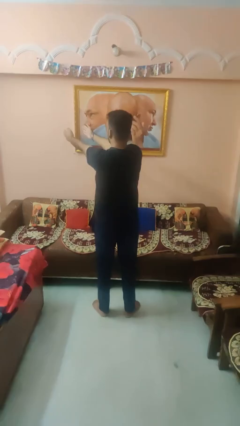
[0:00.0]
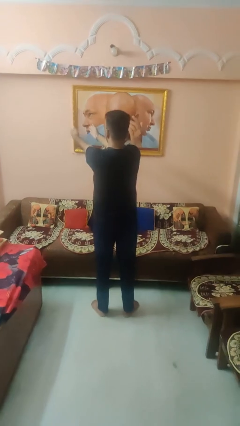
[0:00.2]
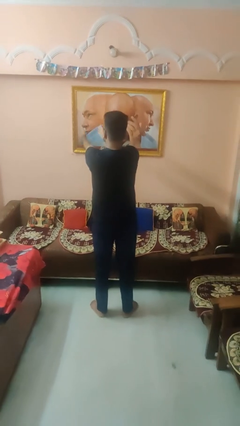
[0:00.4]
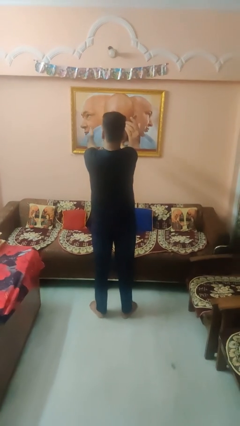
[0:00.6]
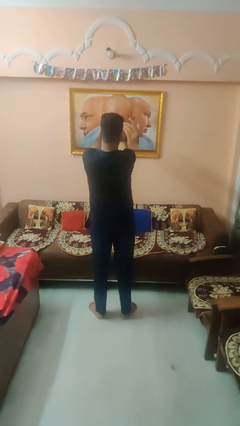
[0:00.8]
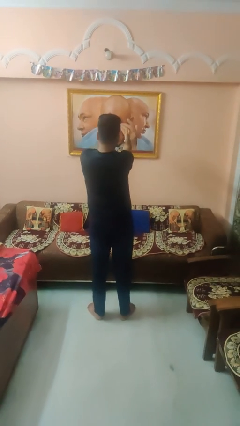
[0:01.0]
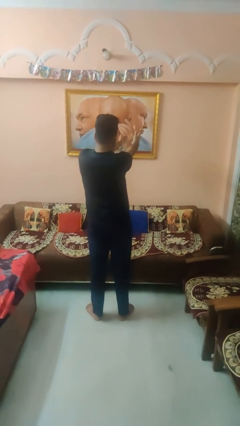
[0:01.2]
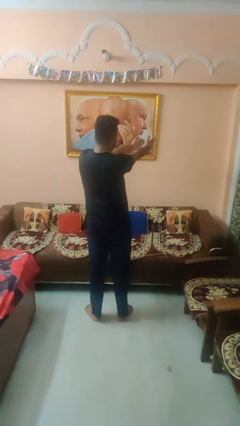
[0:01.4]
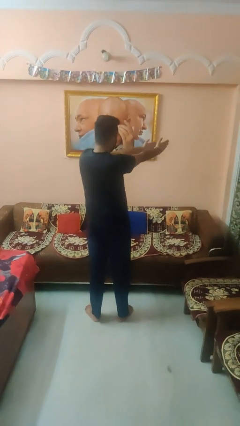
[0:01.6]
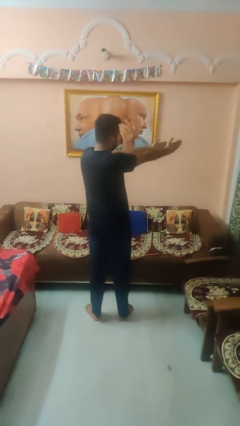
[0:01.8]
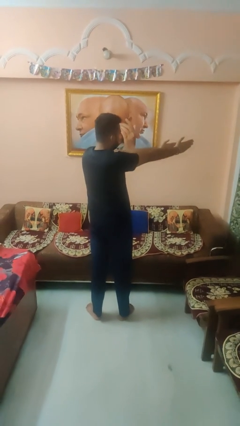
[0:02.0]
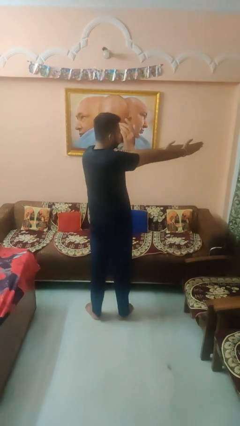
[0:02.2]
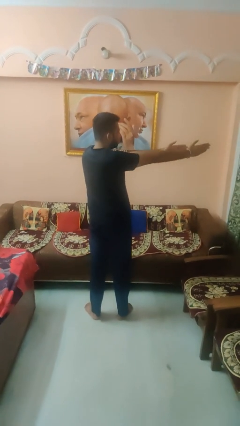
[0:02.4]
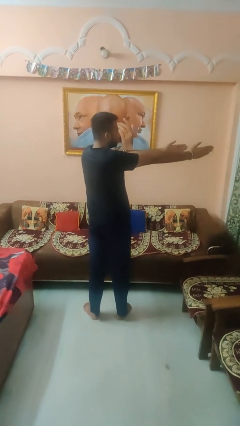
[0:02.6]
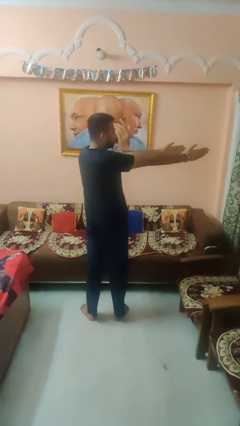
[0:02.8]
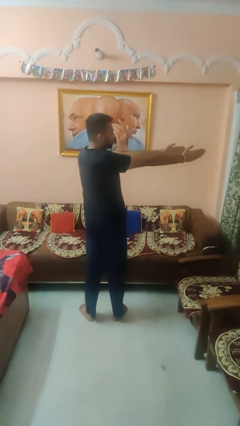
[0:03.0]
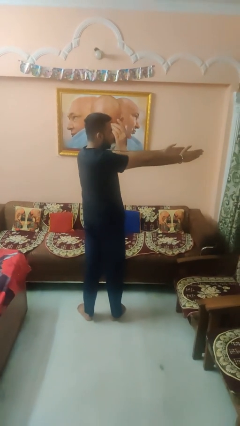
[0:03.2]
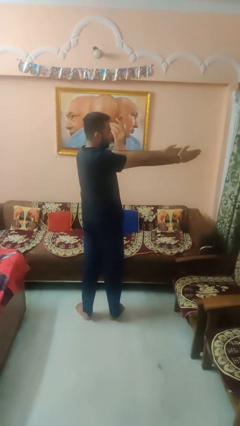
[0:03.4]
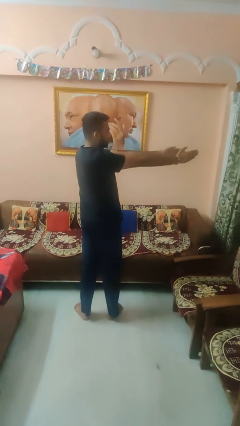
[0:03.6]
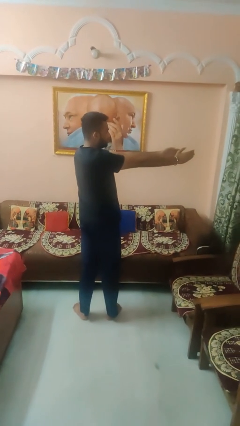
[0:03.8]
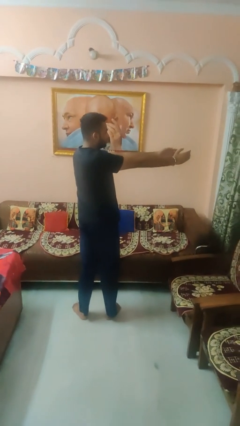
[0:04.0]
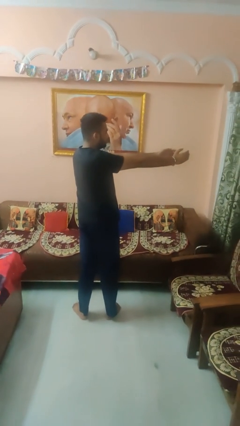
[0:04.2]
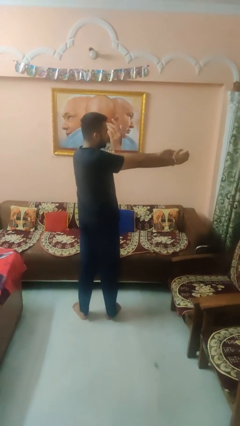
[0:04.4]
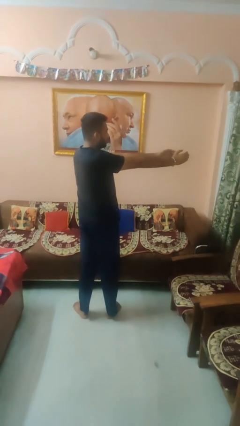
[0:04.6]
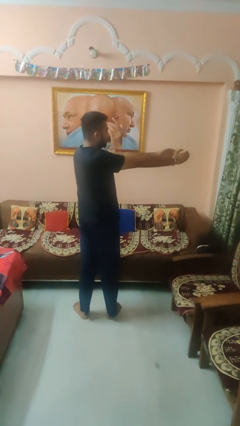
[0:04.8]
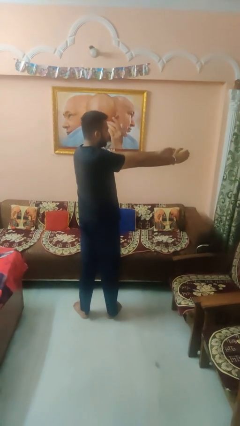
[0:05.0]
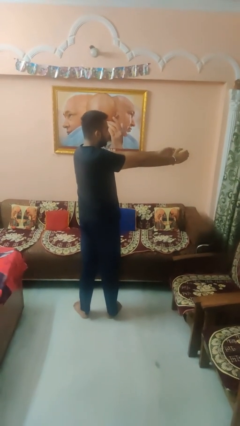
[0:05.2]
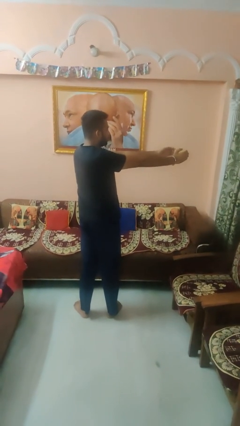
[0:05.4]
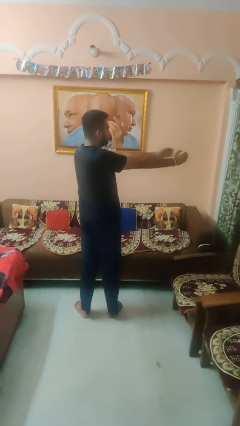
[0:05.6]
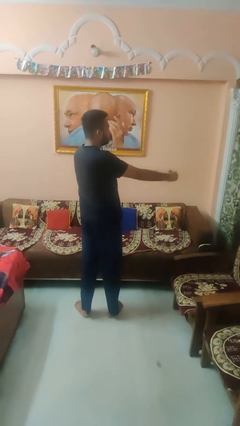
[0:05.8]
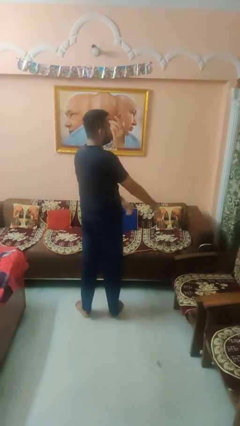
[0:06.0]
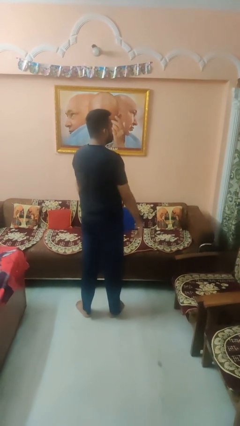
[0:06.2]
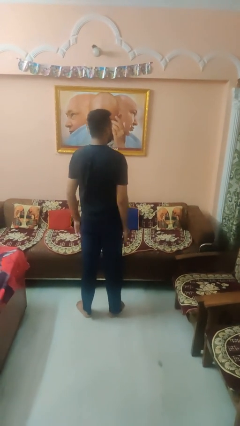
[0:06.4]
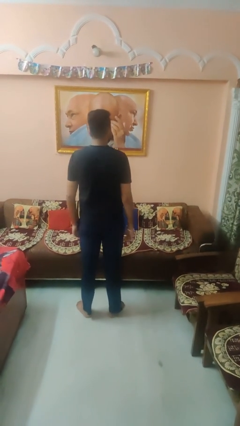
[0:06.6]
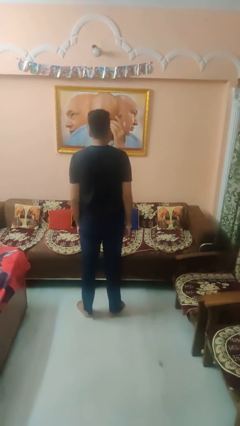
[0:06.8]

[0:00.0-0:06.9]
person gestures swipe right

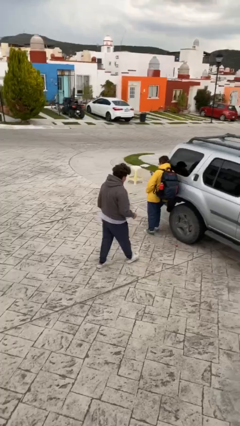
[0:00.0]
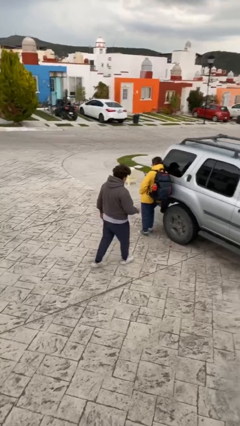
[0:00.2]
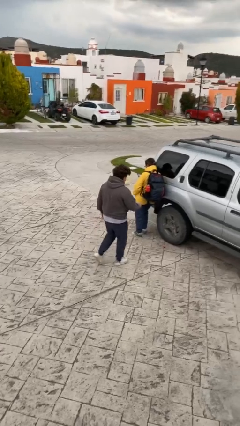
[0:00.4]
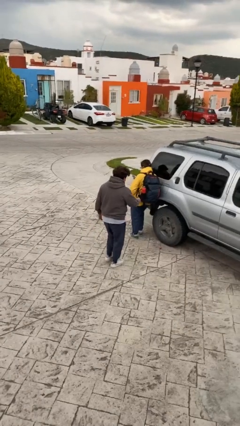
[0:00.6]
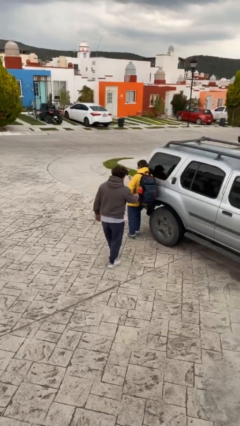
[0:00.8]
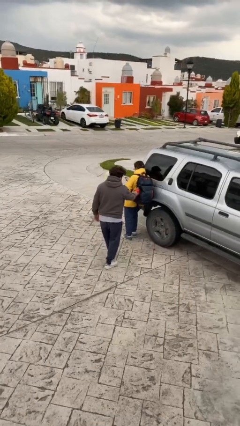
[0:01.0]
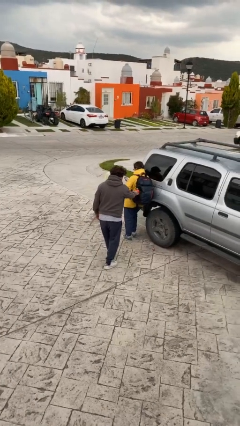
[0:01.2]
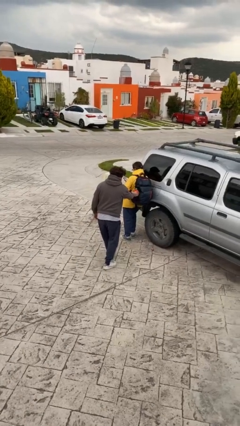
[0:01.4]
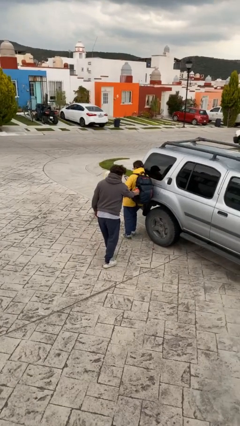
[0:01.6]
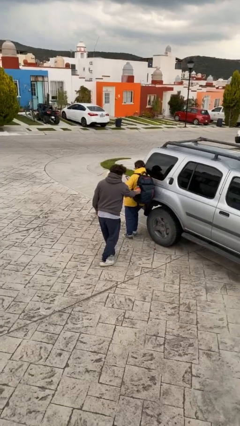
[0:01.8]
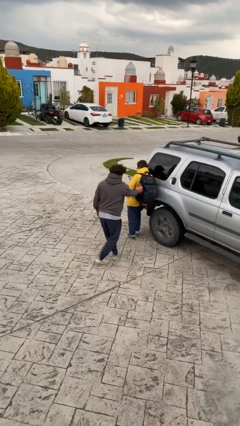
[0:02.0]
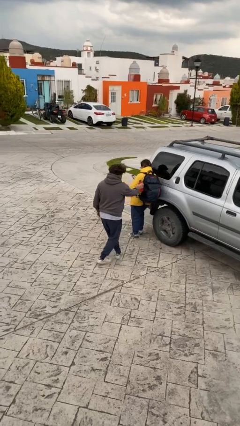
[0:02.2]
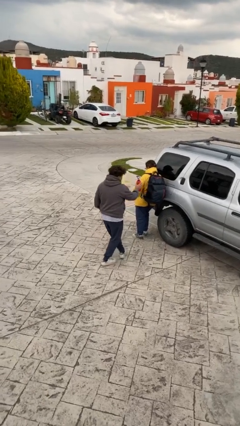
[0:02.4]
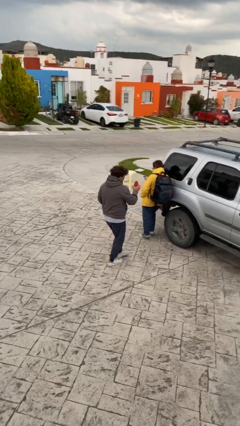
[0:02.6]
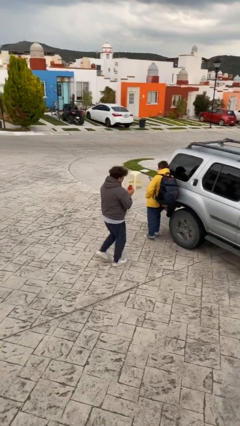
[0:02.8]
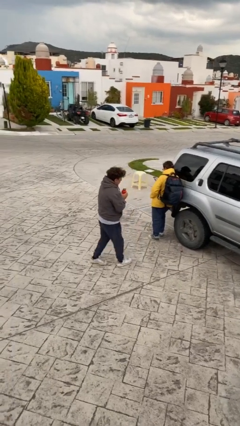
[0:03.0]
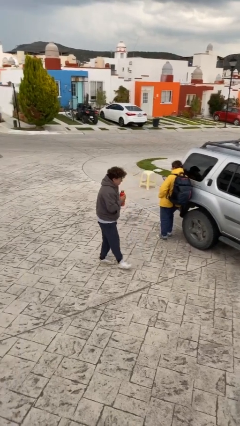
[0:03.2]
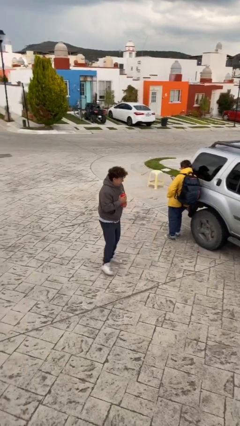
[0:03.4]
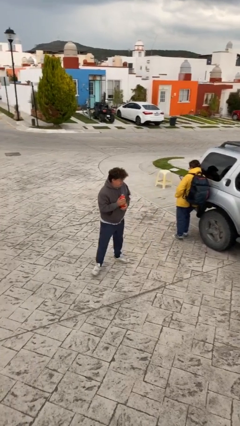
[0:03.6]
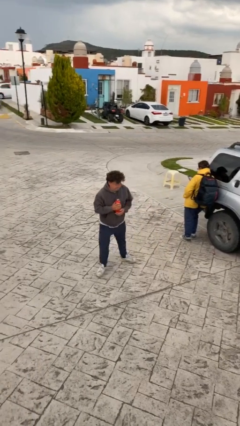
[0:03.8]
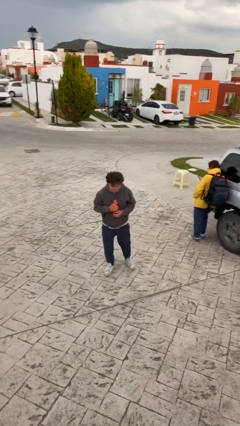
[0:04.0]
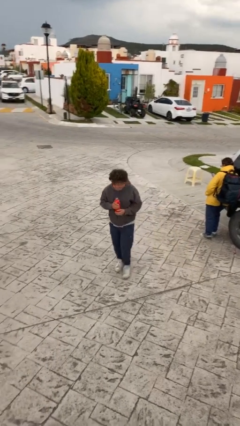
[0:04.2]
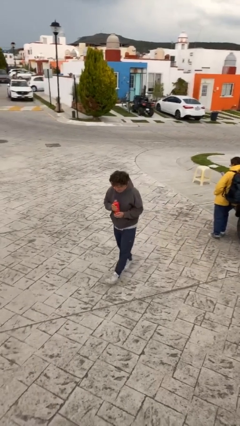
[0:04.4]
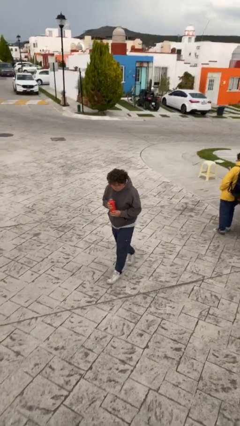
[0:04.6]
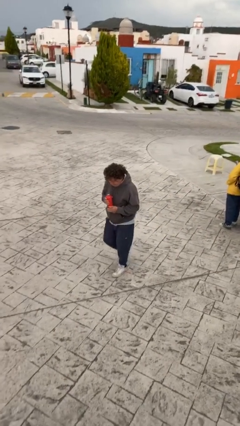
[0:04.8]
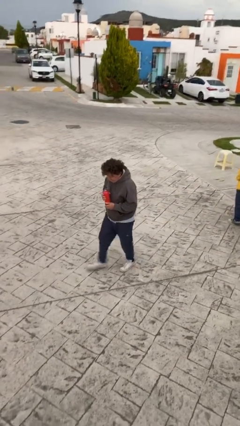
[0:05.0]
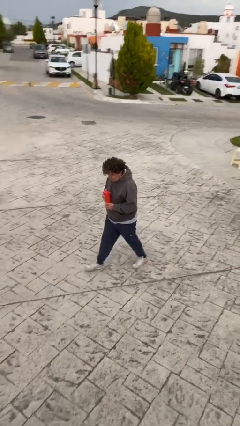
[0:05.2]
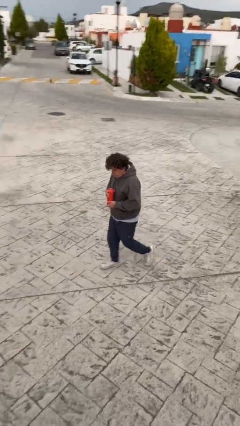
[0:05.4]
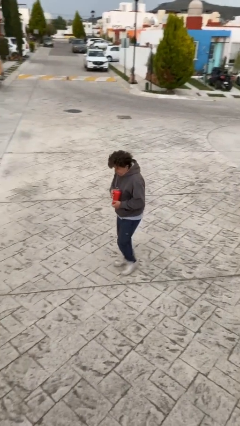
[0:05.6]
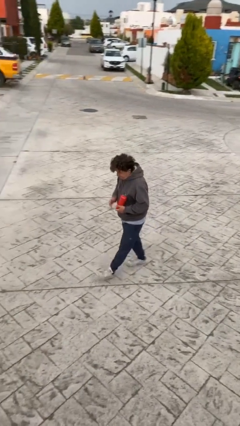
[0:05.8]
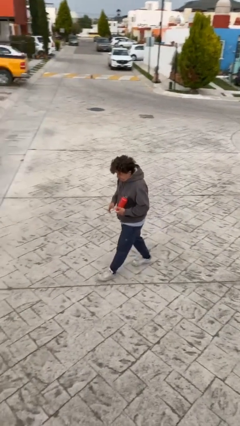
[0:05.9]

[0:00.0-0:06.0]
person steals object from person

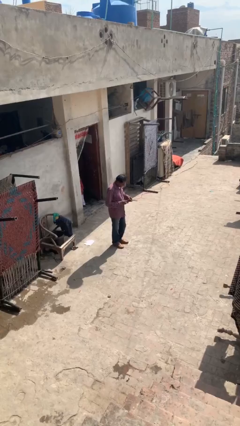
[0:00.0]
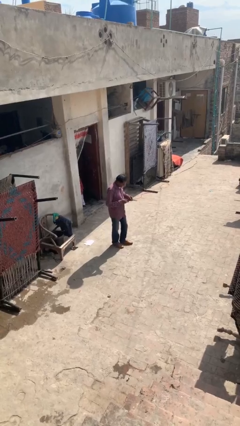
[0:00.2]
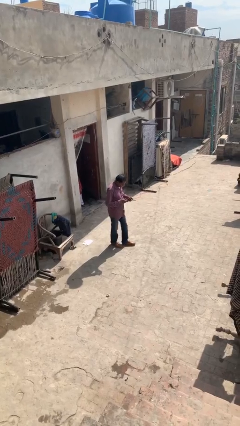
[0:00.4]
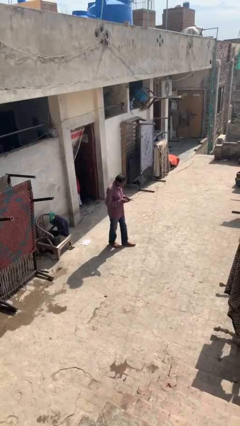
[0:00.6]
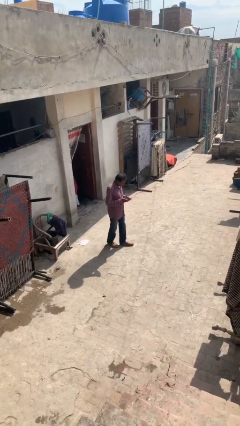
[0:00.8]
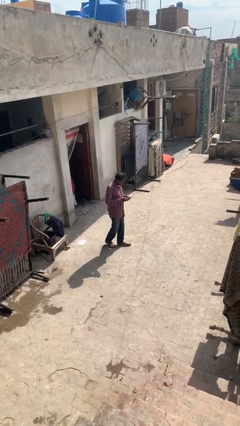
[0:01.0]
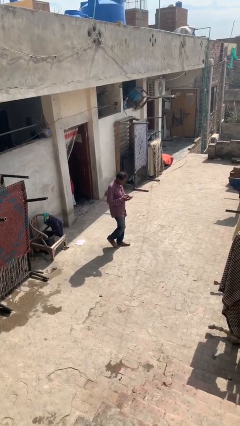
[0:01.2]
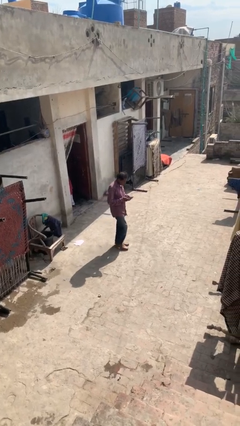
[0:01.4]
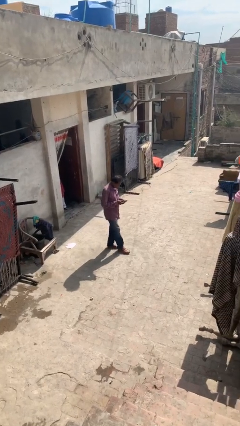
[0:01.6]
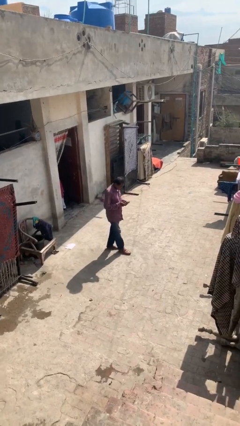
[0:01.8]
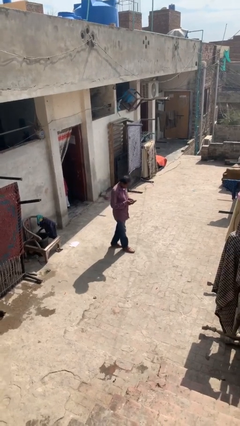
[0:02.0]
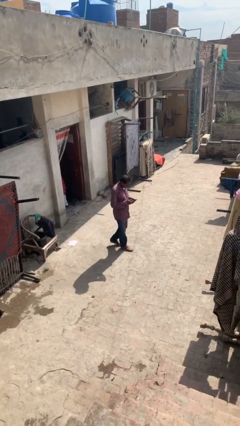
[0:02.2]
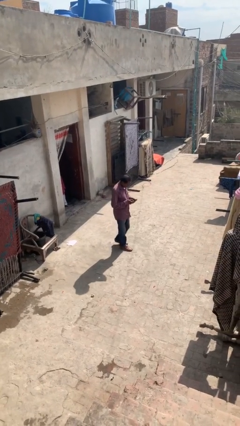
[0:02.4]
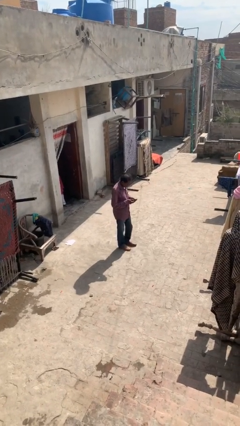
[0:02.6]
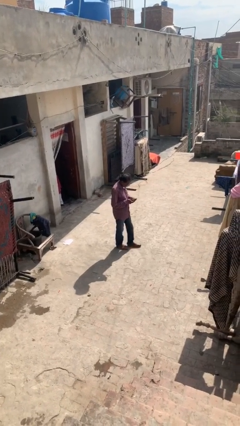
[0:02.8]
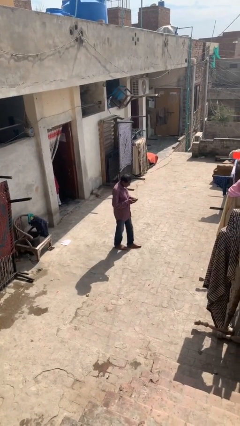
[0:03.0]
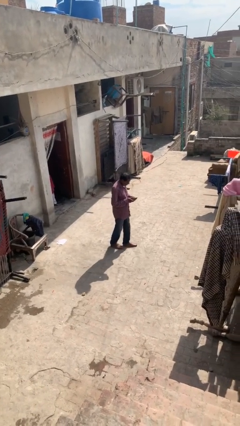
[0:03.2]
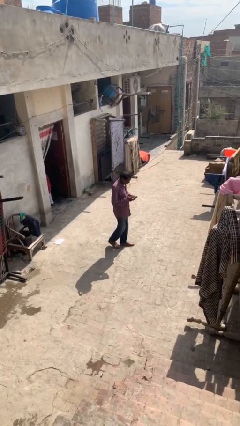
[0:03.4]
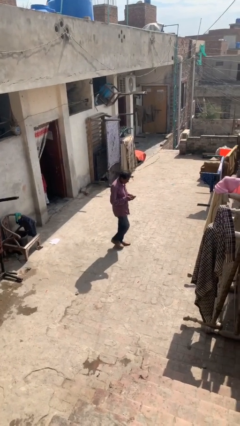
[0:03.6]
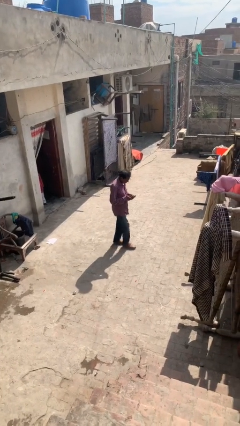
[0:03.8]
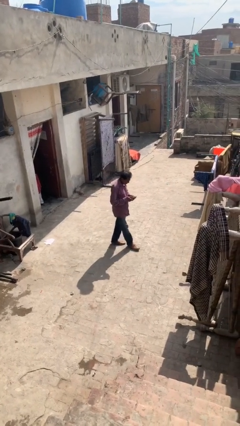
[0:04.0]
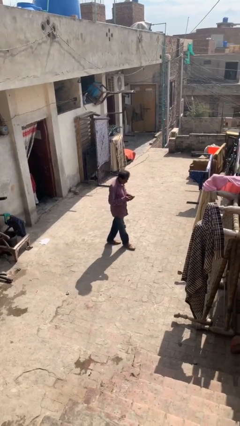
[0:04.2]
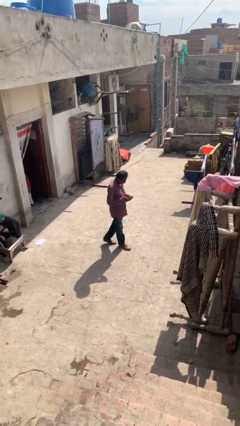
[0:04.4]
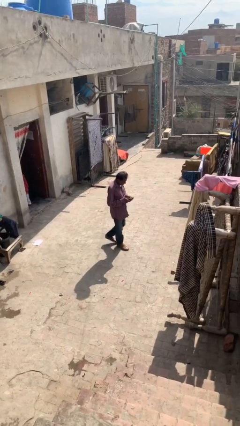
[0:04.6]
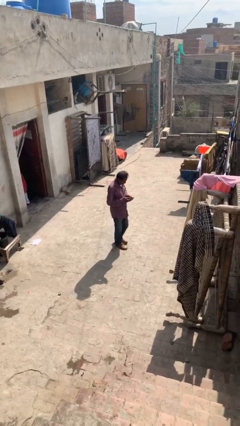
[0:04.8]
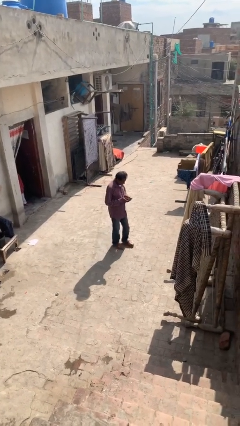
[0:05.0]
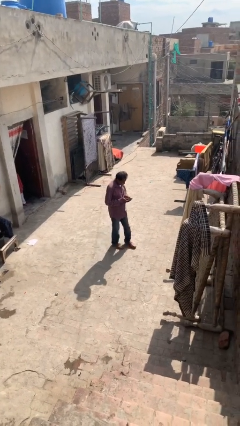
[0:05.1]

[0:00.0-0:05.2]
person texts on phone
